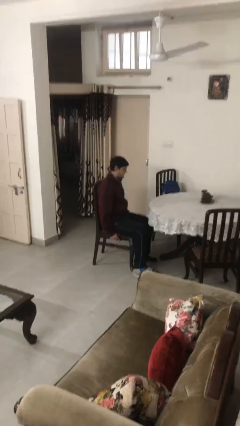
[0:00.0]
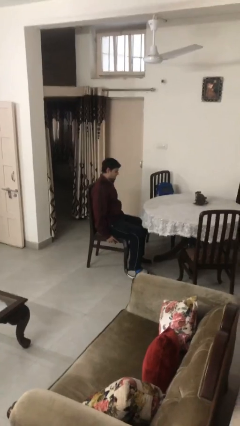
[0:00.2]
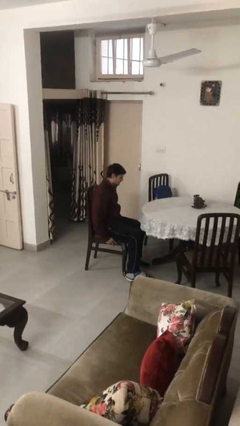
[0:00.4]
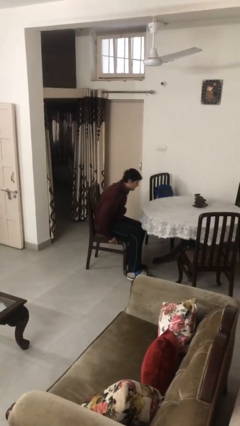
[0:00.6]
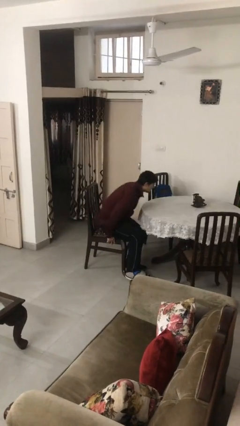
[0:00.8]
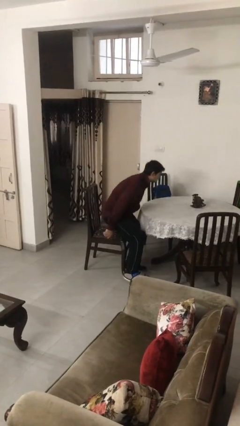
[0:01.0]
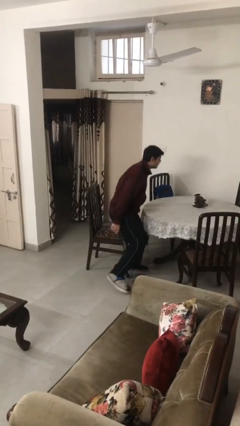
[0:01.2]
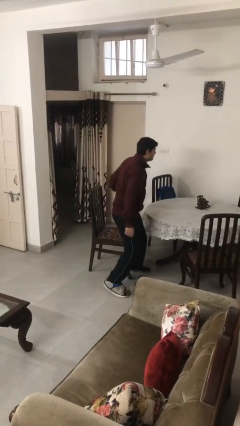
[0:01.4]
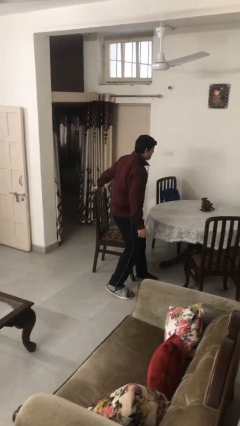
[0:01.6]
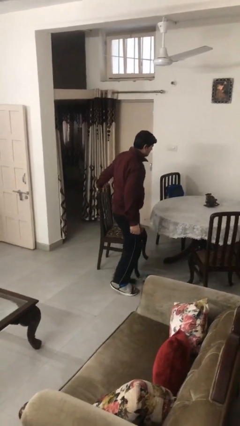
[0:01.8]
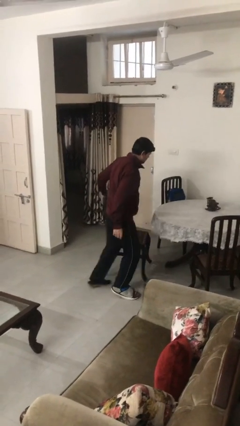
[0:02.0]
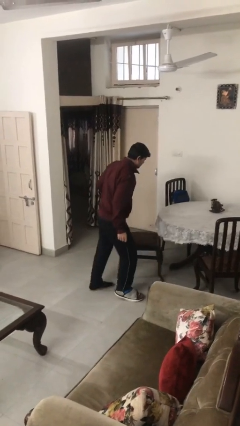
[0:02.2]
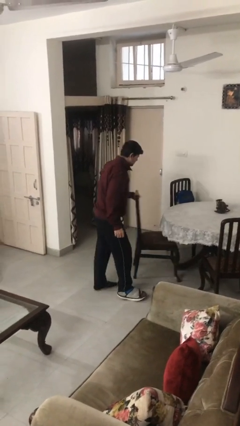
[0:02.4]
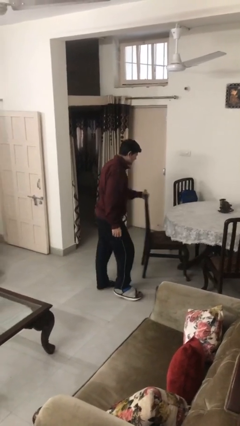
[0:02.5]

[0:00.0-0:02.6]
person stands up

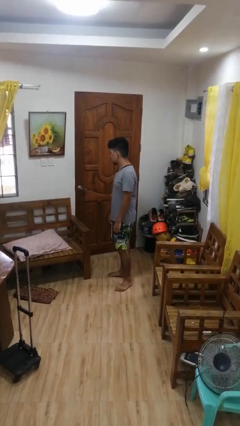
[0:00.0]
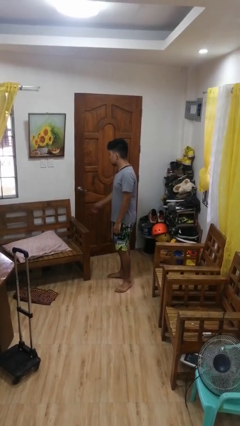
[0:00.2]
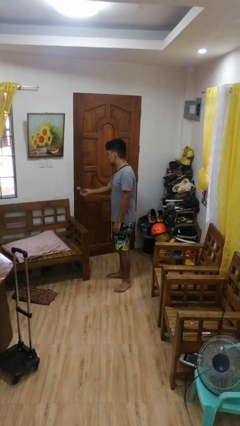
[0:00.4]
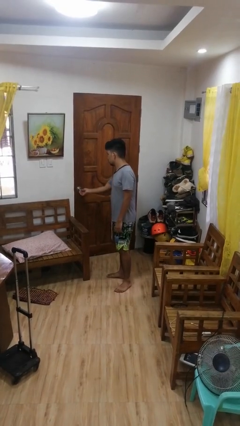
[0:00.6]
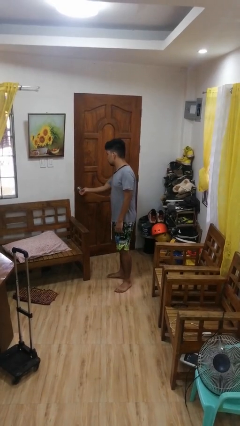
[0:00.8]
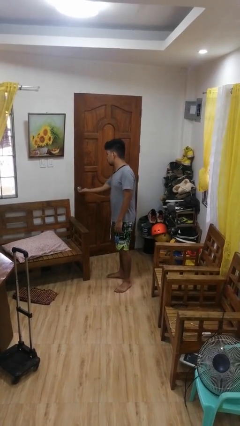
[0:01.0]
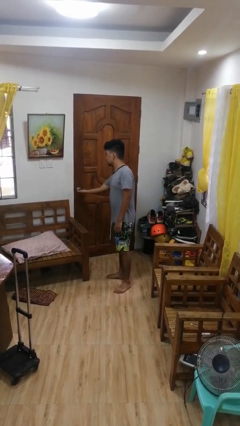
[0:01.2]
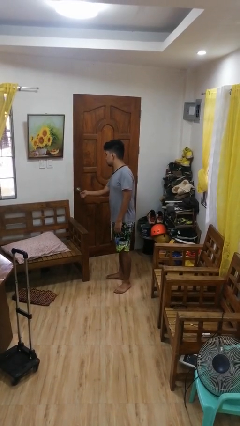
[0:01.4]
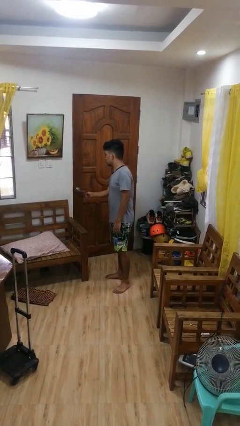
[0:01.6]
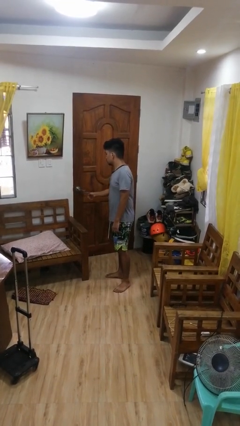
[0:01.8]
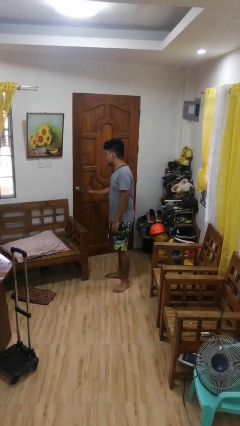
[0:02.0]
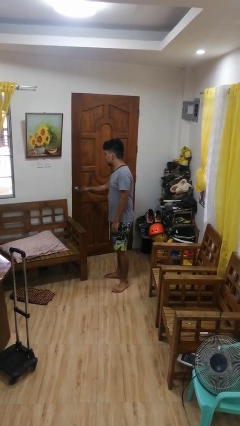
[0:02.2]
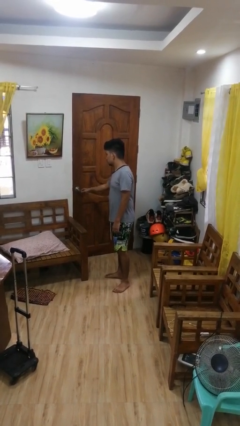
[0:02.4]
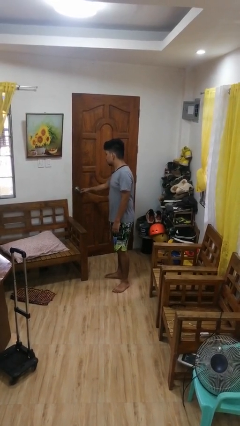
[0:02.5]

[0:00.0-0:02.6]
person unlocks door with keys

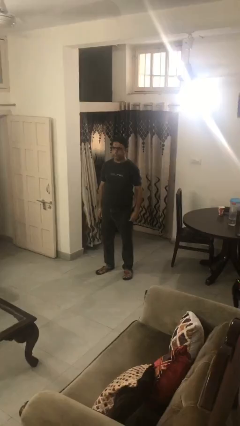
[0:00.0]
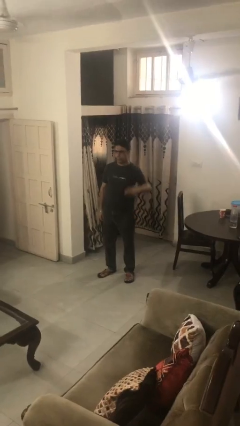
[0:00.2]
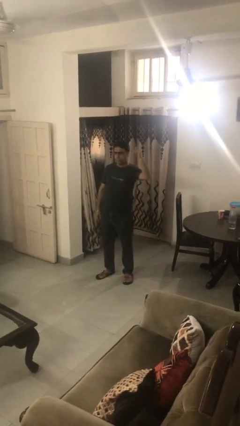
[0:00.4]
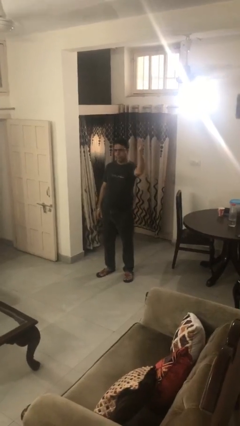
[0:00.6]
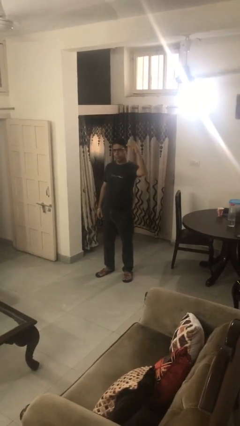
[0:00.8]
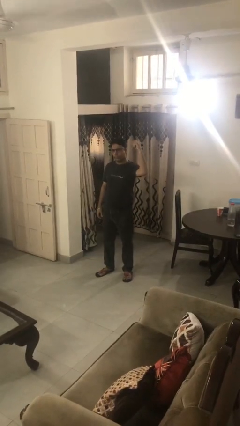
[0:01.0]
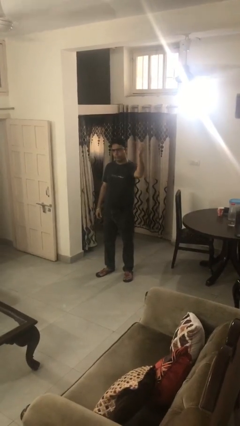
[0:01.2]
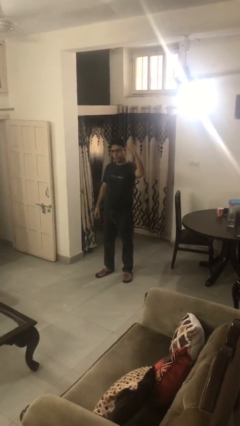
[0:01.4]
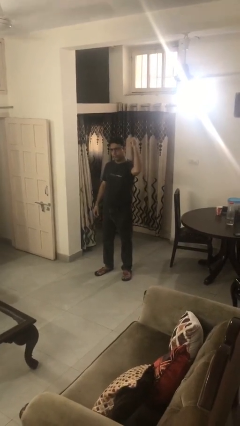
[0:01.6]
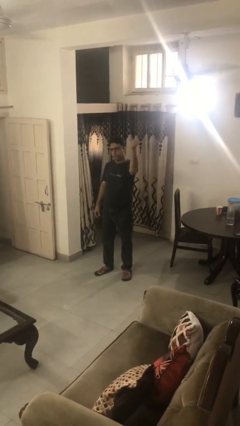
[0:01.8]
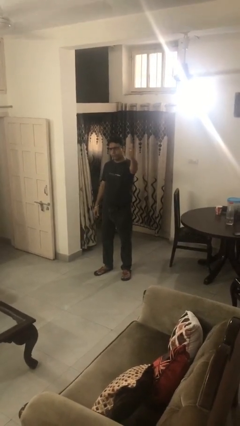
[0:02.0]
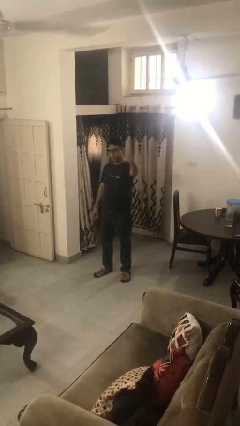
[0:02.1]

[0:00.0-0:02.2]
person snaps fingers

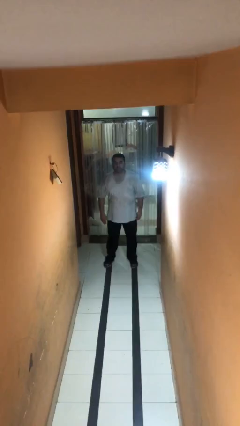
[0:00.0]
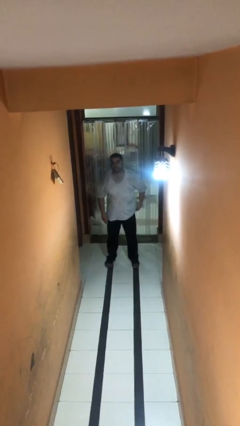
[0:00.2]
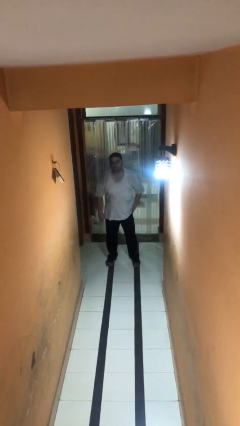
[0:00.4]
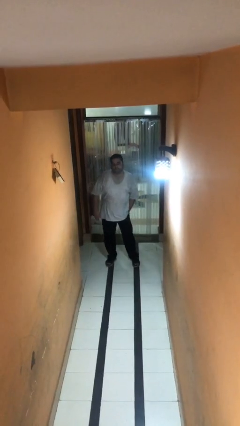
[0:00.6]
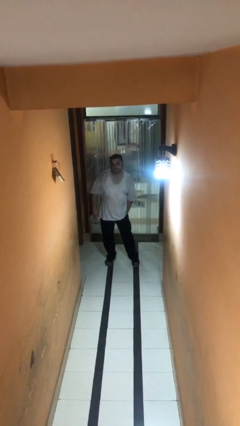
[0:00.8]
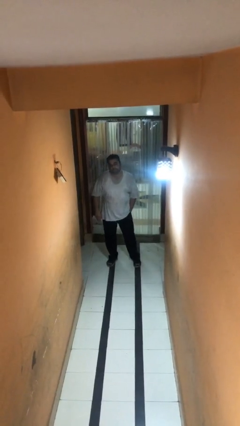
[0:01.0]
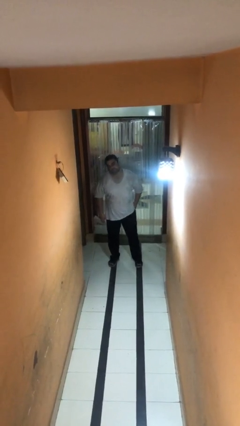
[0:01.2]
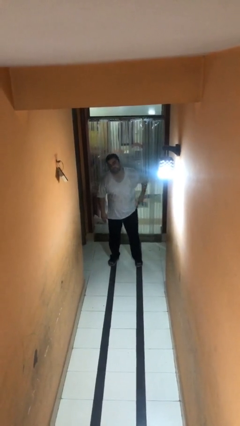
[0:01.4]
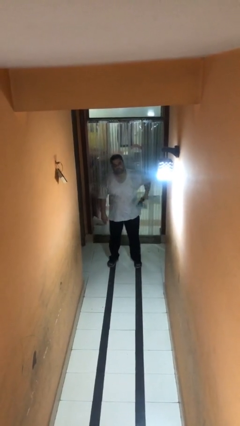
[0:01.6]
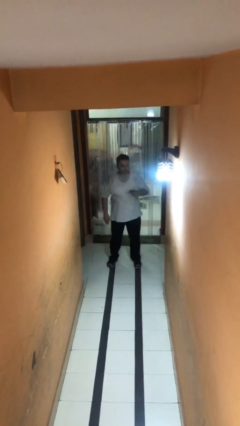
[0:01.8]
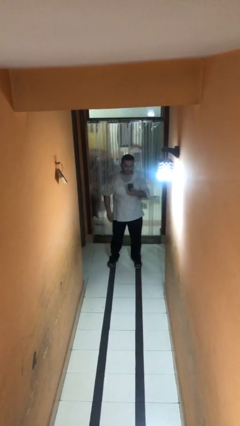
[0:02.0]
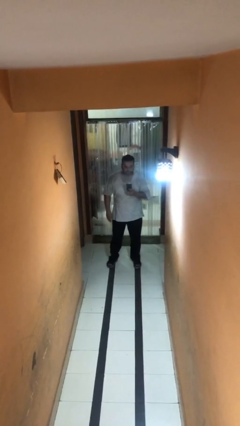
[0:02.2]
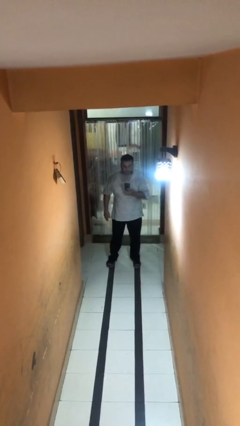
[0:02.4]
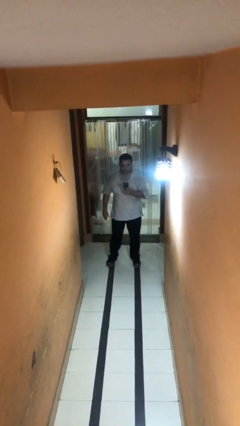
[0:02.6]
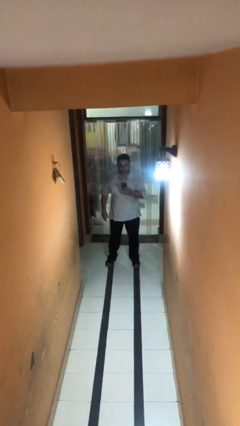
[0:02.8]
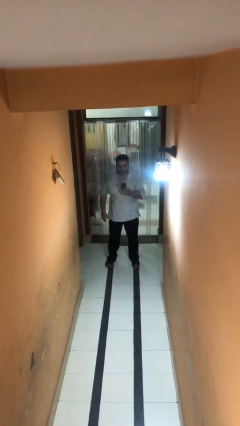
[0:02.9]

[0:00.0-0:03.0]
person takes phone from pocket

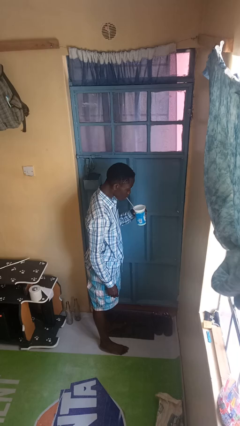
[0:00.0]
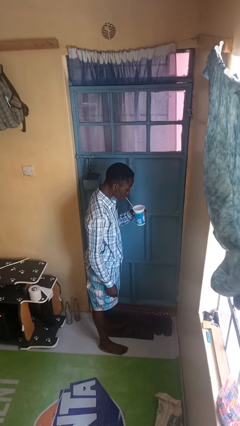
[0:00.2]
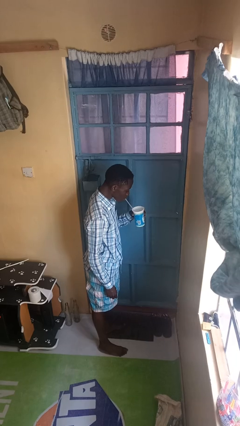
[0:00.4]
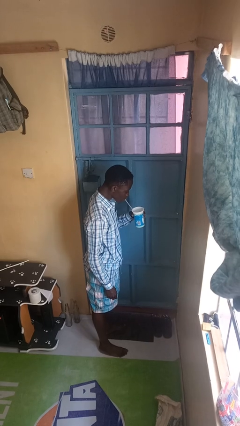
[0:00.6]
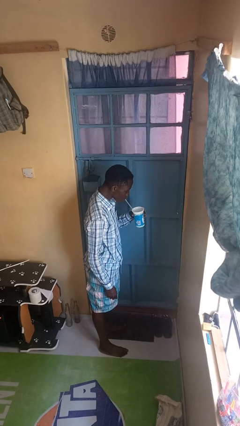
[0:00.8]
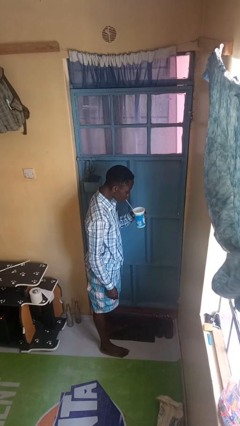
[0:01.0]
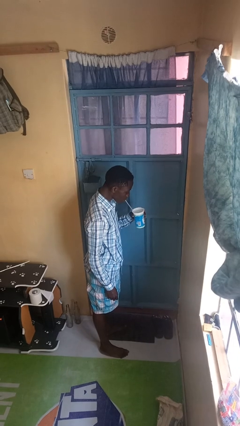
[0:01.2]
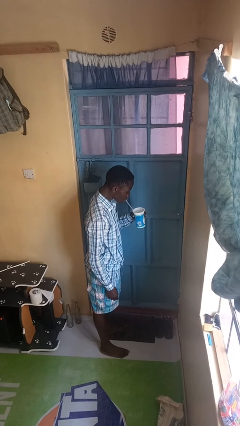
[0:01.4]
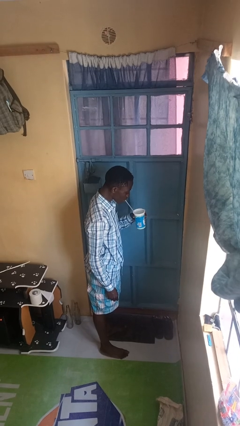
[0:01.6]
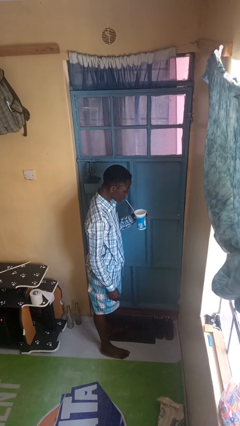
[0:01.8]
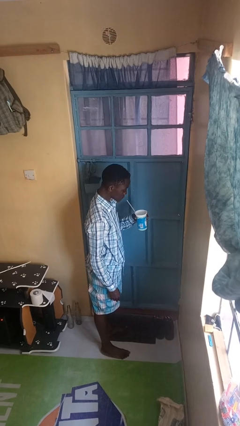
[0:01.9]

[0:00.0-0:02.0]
person drinks from straw

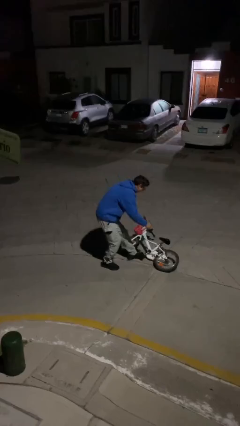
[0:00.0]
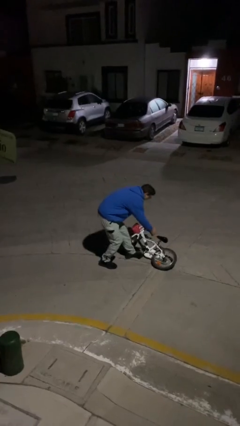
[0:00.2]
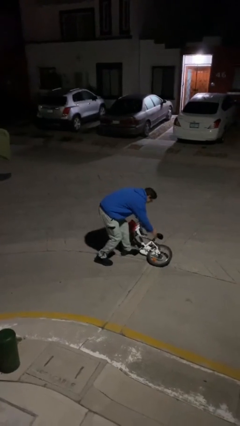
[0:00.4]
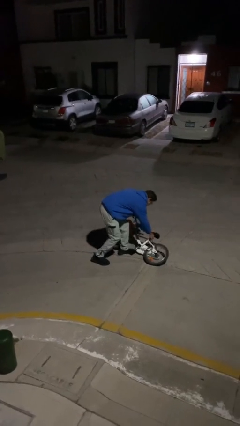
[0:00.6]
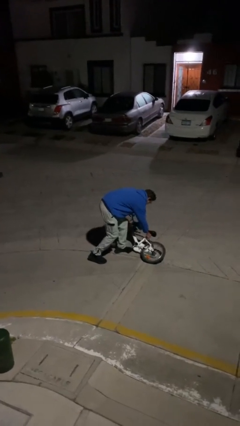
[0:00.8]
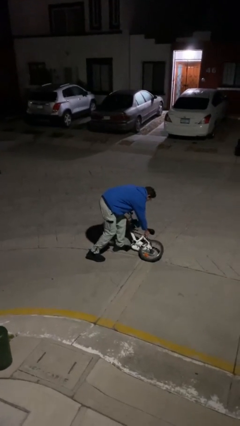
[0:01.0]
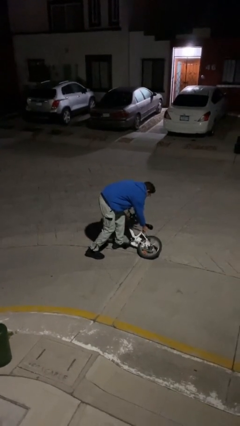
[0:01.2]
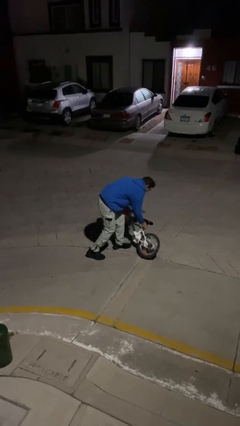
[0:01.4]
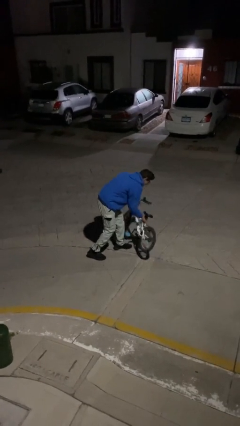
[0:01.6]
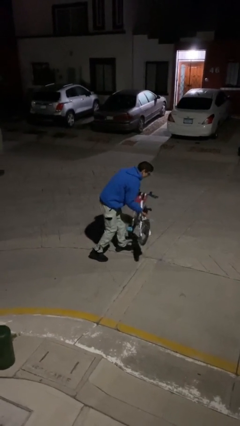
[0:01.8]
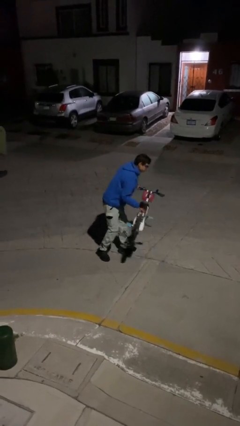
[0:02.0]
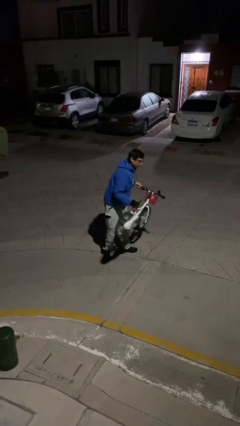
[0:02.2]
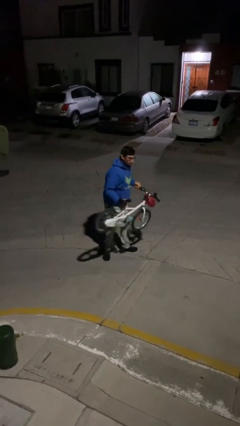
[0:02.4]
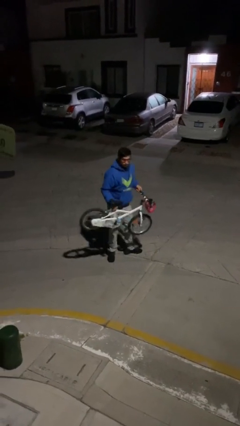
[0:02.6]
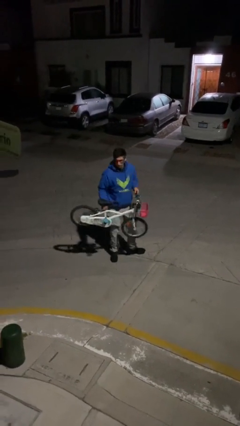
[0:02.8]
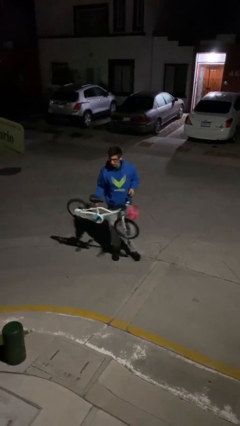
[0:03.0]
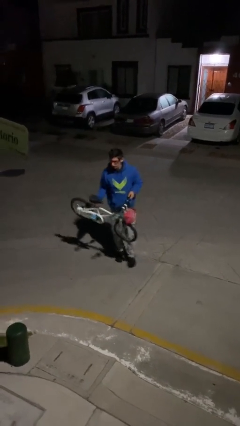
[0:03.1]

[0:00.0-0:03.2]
person picks up object from floor

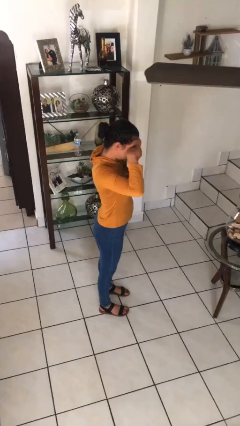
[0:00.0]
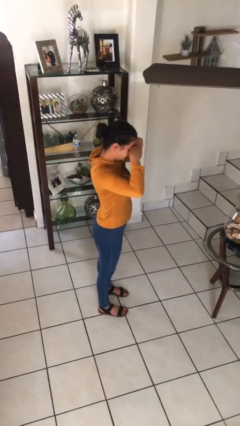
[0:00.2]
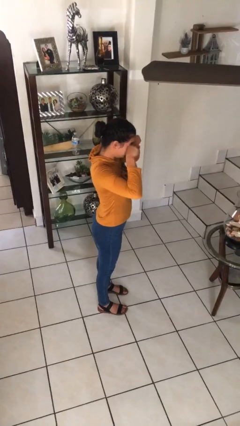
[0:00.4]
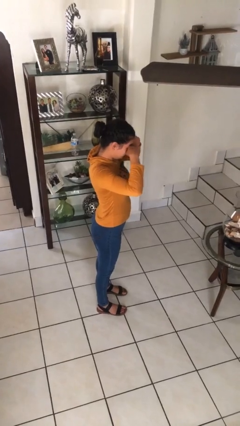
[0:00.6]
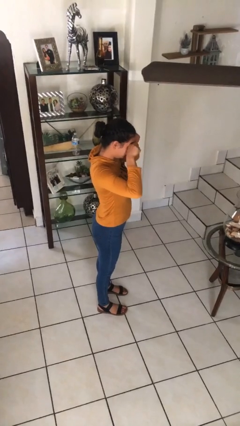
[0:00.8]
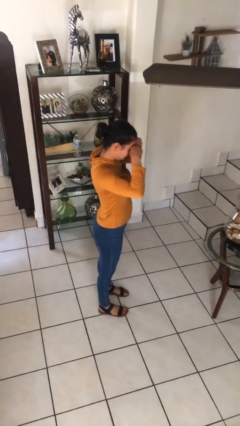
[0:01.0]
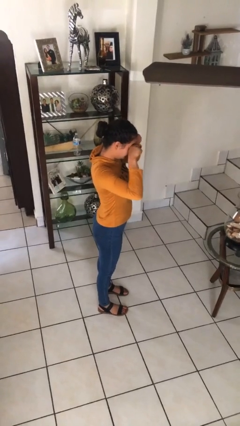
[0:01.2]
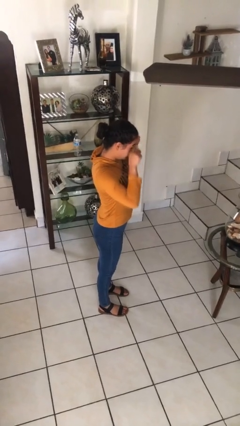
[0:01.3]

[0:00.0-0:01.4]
person rubs eyes
